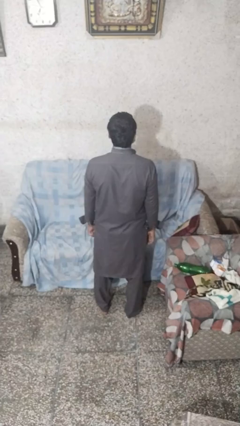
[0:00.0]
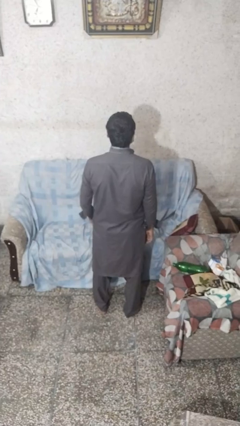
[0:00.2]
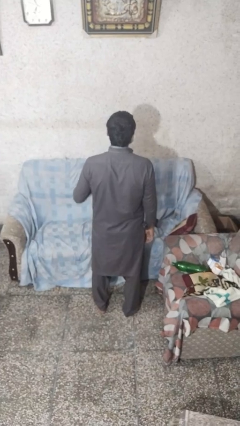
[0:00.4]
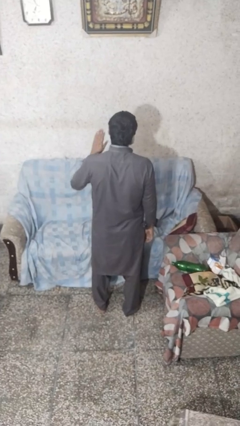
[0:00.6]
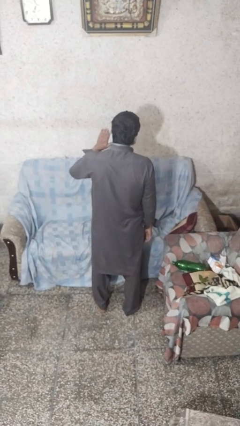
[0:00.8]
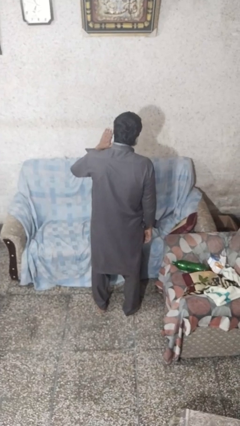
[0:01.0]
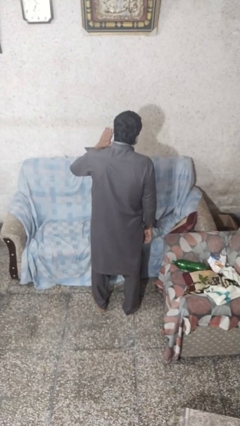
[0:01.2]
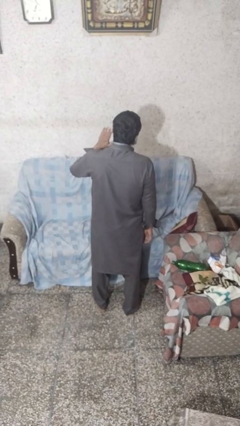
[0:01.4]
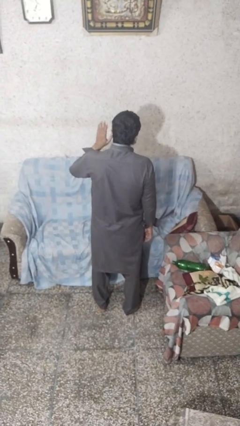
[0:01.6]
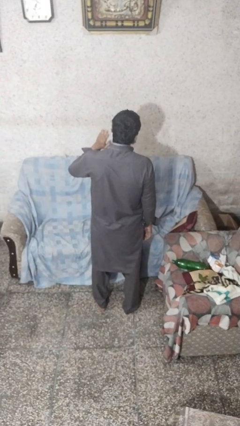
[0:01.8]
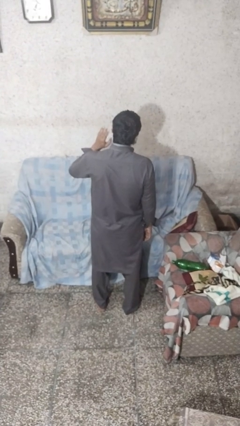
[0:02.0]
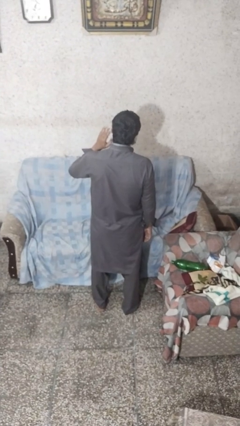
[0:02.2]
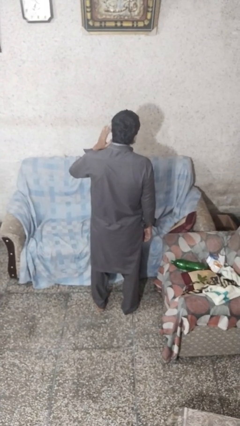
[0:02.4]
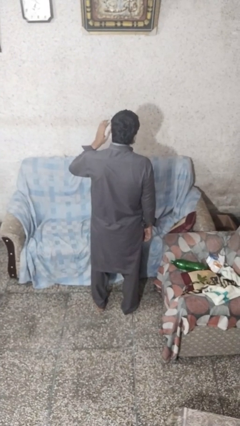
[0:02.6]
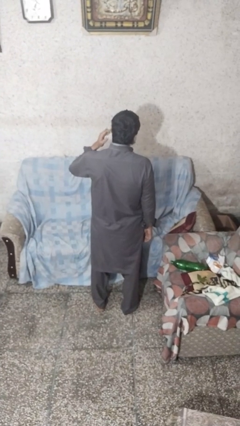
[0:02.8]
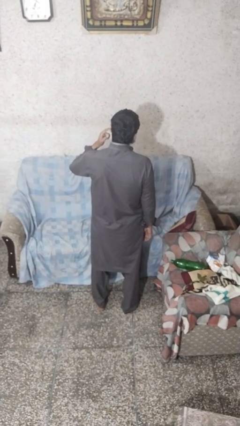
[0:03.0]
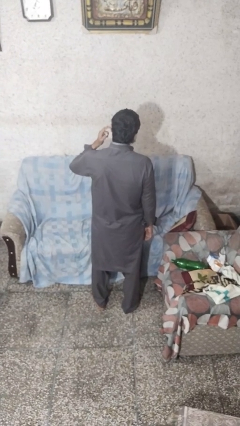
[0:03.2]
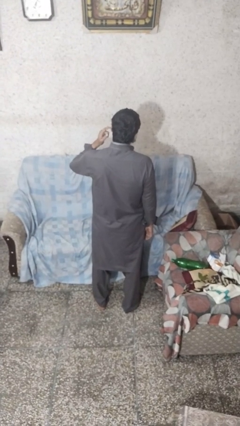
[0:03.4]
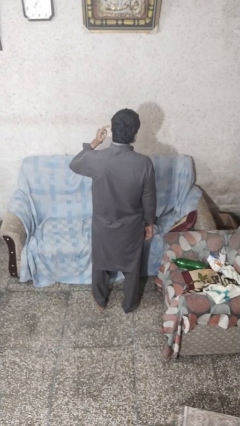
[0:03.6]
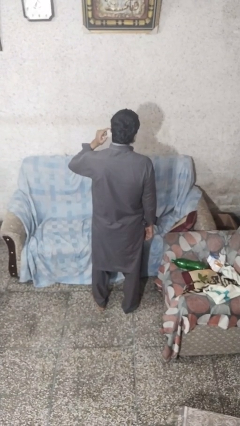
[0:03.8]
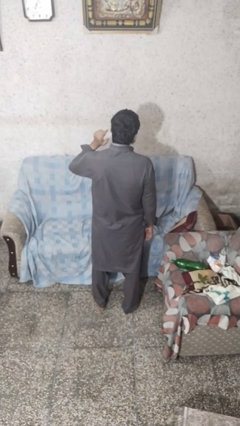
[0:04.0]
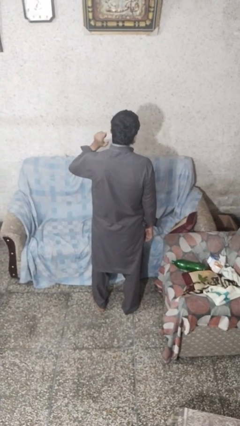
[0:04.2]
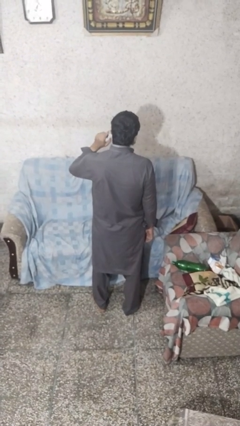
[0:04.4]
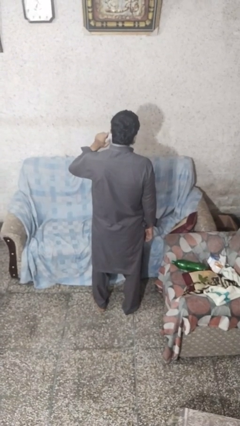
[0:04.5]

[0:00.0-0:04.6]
person gestures listen closely

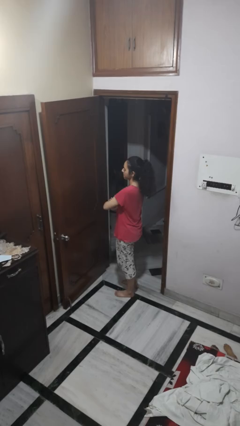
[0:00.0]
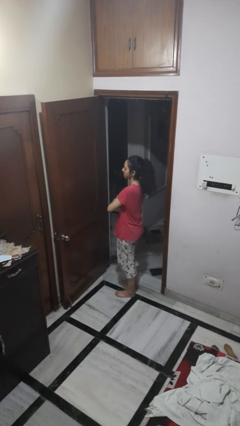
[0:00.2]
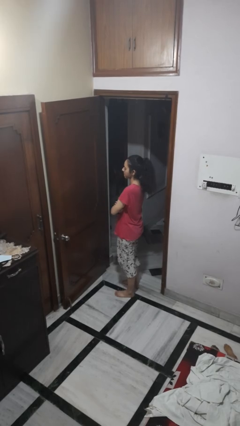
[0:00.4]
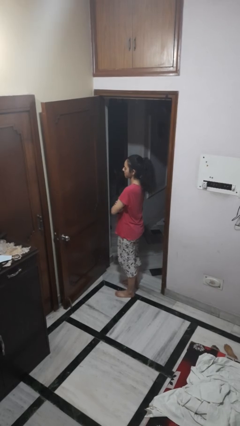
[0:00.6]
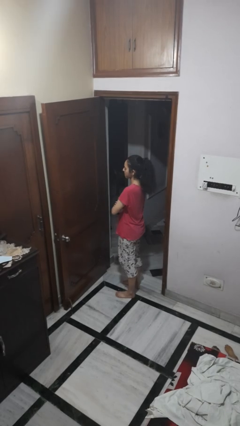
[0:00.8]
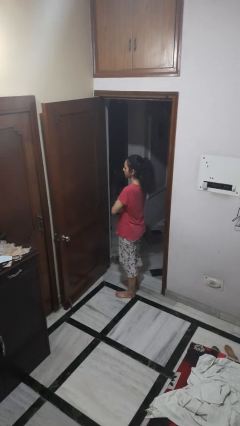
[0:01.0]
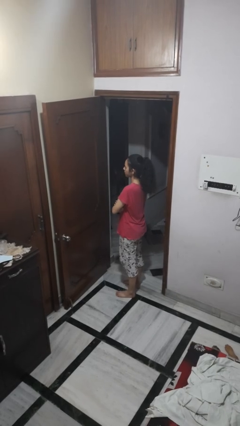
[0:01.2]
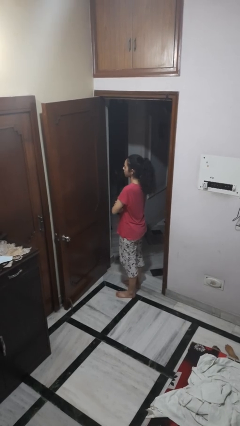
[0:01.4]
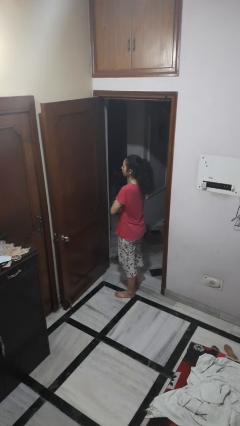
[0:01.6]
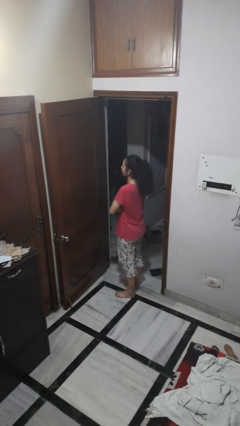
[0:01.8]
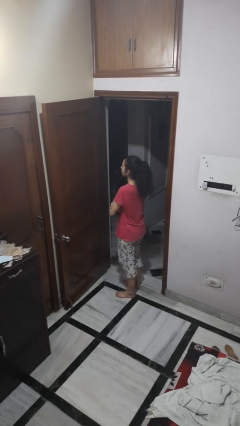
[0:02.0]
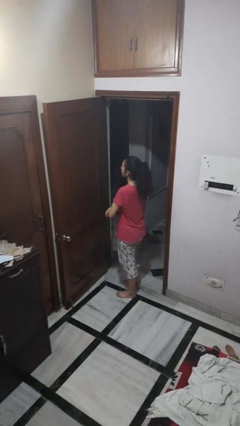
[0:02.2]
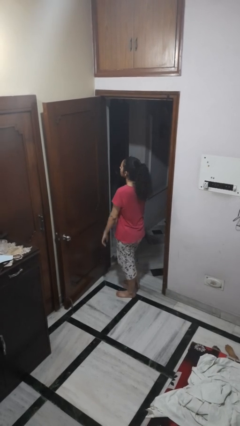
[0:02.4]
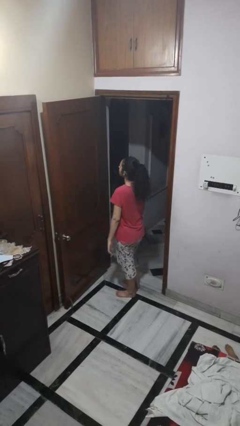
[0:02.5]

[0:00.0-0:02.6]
person crosses arms

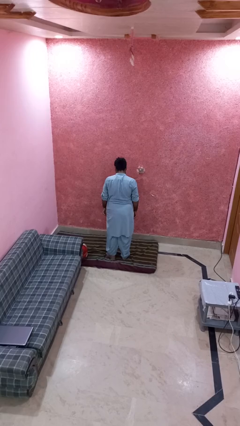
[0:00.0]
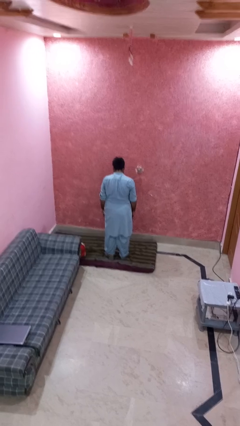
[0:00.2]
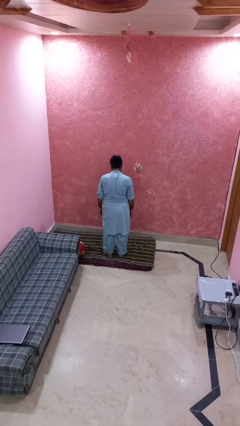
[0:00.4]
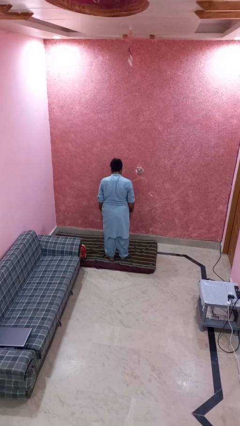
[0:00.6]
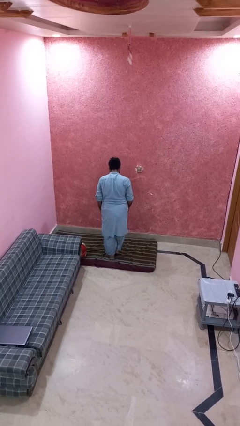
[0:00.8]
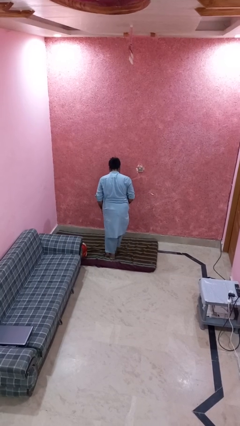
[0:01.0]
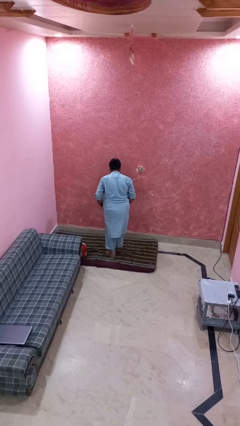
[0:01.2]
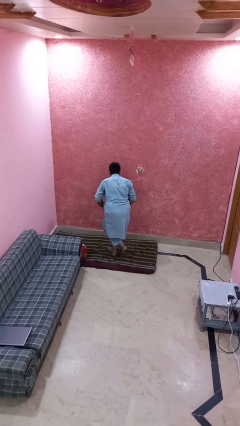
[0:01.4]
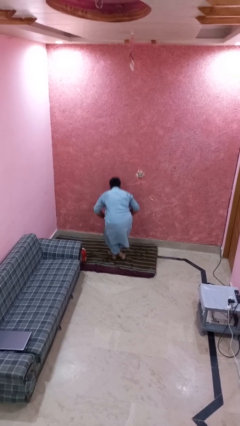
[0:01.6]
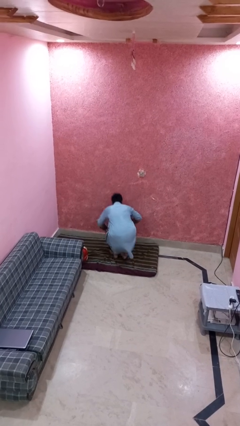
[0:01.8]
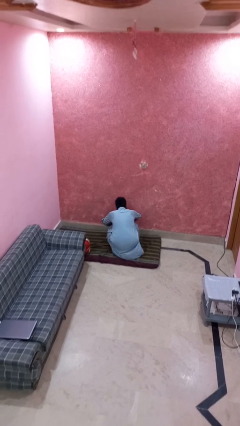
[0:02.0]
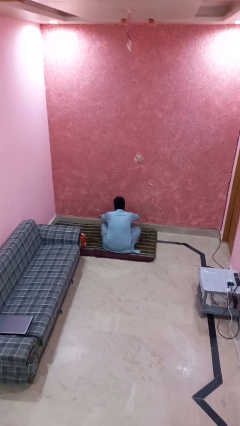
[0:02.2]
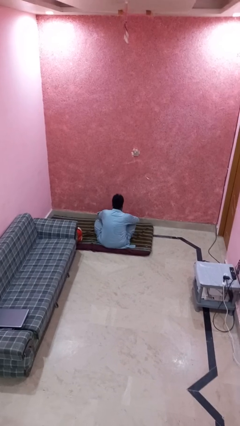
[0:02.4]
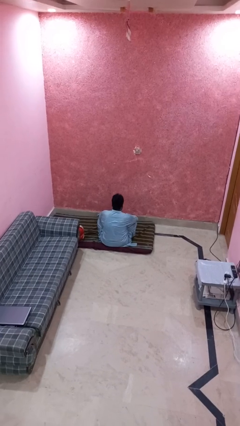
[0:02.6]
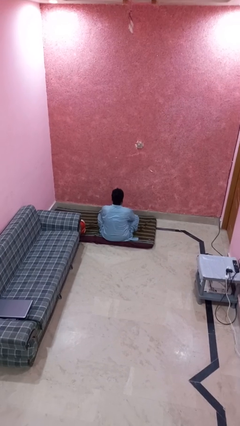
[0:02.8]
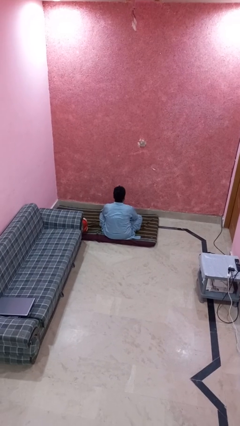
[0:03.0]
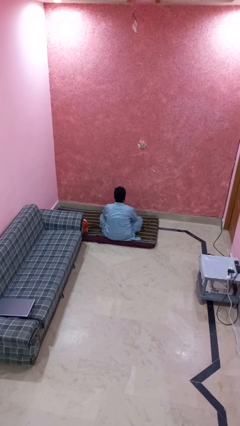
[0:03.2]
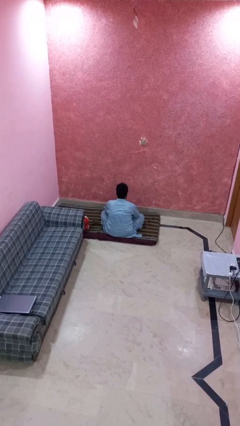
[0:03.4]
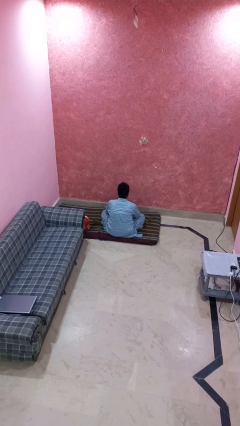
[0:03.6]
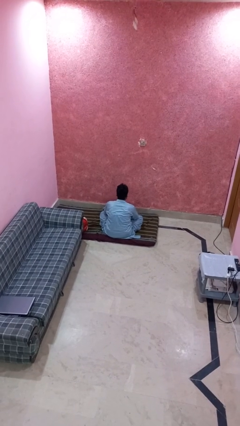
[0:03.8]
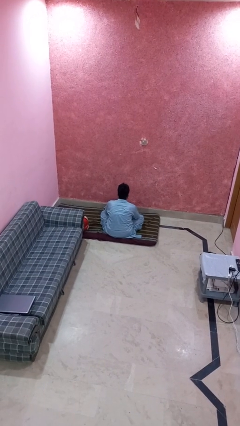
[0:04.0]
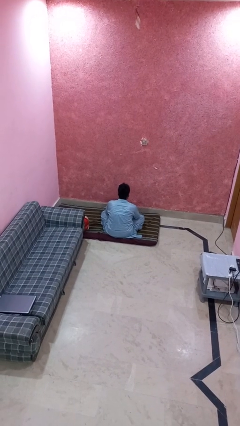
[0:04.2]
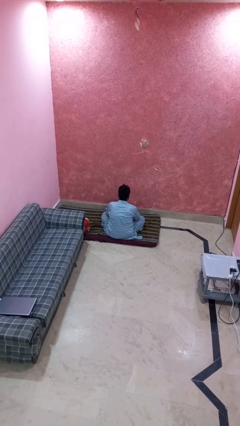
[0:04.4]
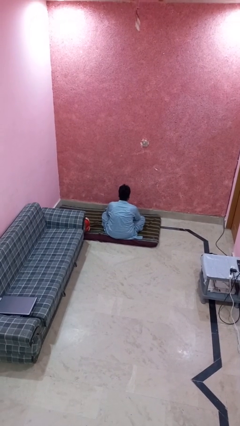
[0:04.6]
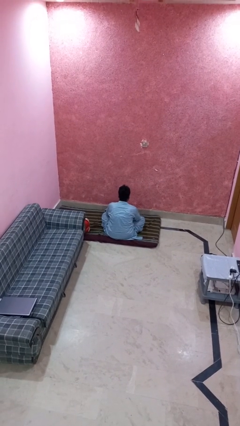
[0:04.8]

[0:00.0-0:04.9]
person sits crisscross

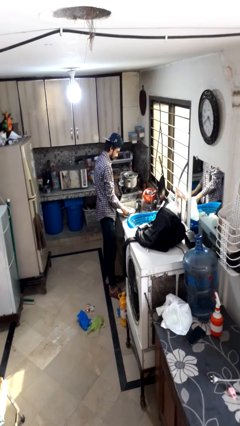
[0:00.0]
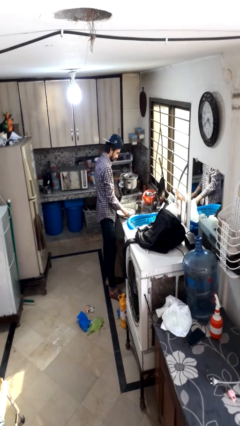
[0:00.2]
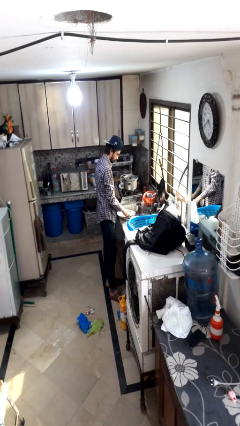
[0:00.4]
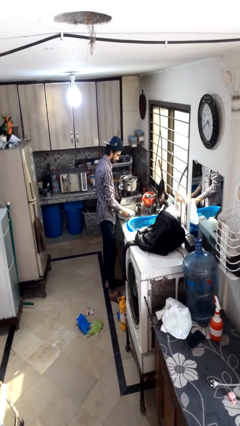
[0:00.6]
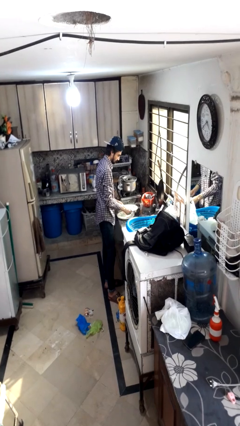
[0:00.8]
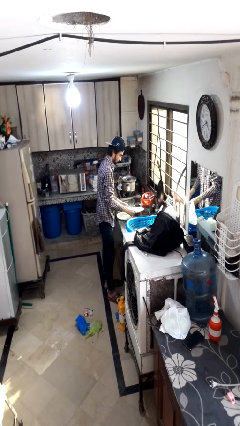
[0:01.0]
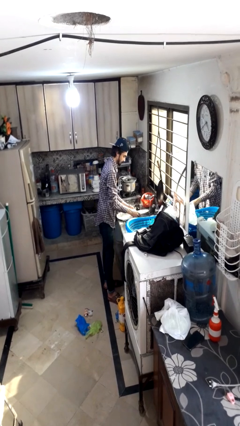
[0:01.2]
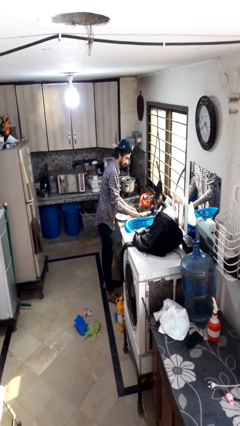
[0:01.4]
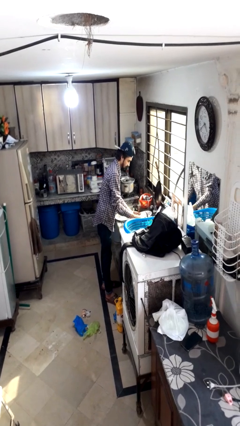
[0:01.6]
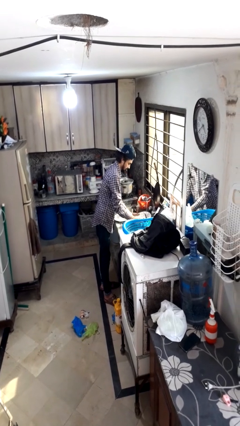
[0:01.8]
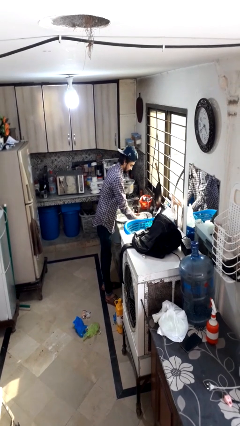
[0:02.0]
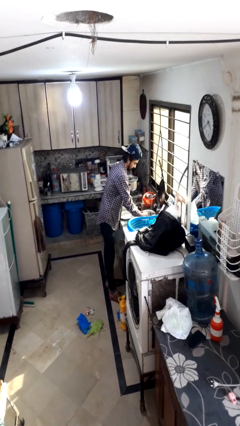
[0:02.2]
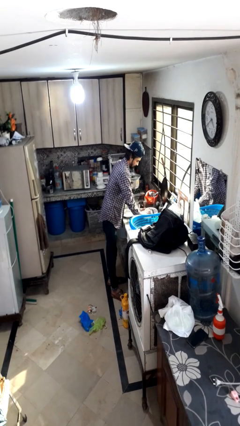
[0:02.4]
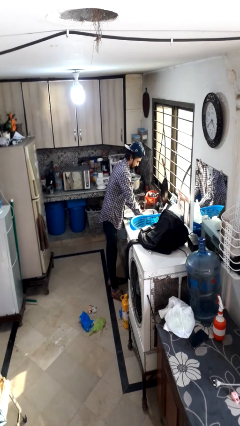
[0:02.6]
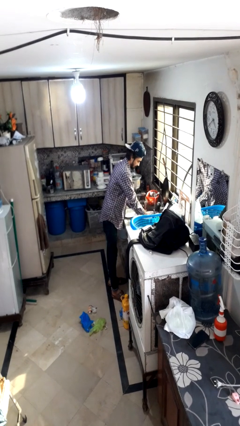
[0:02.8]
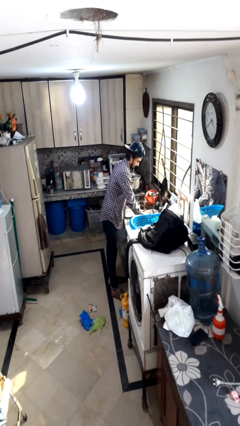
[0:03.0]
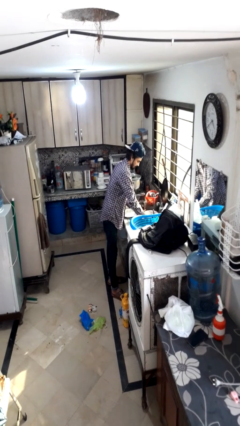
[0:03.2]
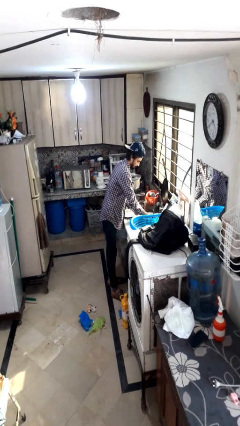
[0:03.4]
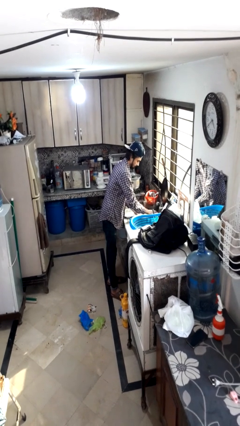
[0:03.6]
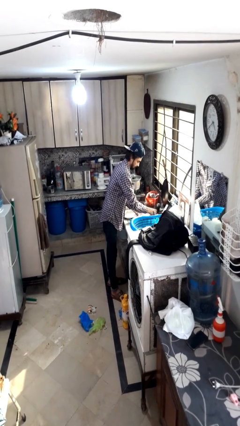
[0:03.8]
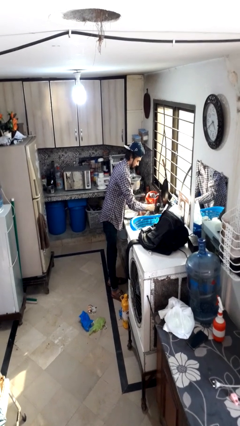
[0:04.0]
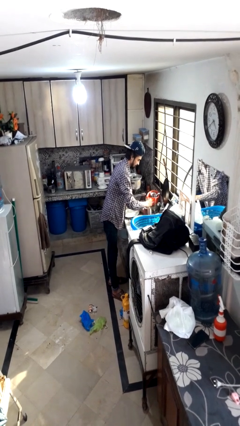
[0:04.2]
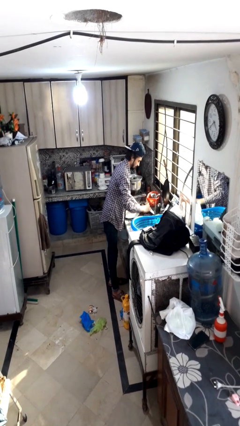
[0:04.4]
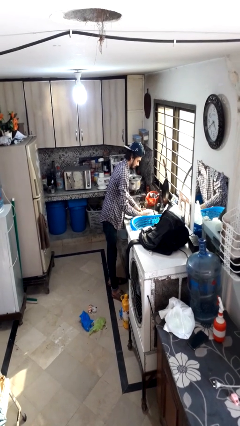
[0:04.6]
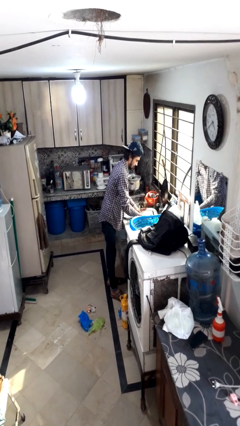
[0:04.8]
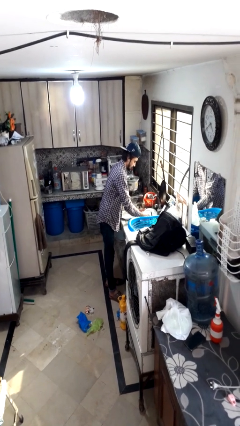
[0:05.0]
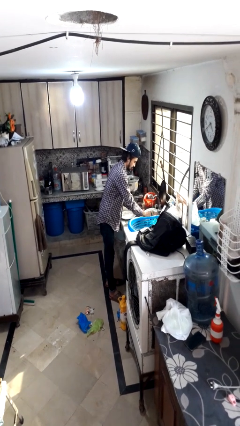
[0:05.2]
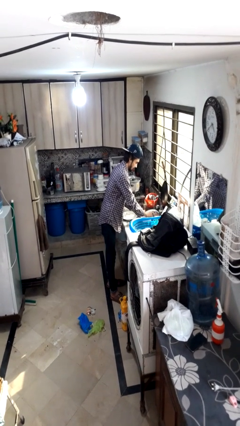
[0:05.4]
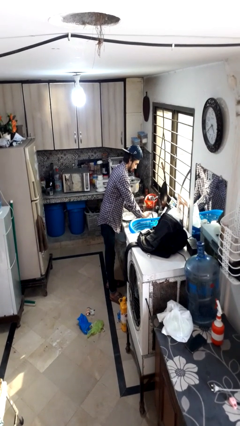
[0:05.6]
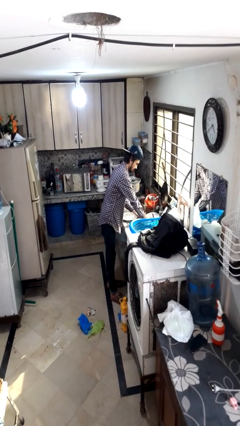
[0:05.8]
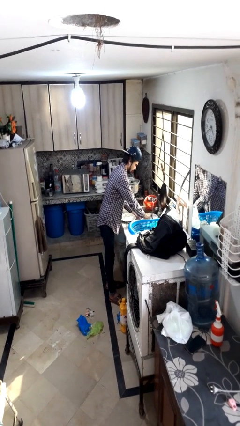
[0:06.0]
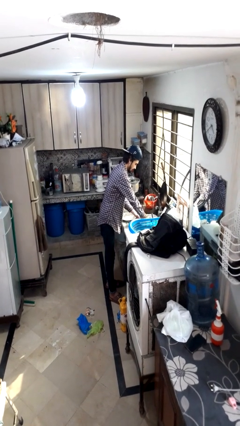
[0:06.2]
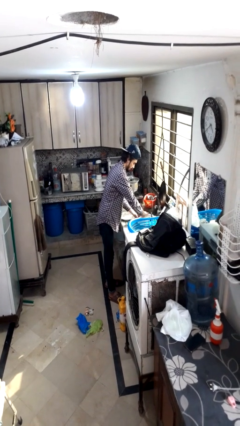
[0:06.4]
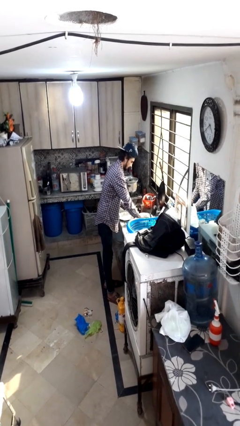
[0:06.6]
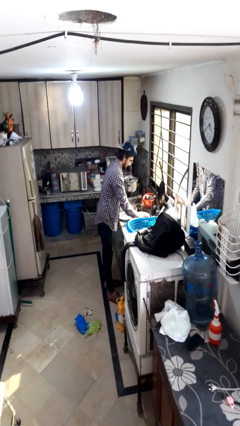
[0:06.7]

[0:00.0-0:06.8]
person washes dish
